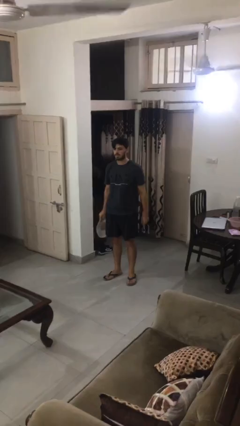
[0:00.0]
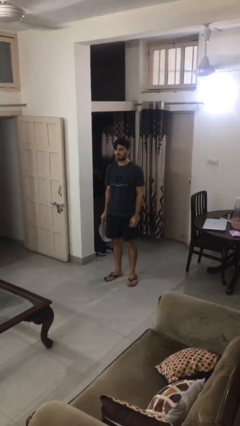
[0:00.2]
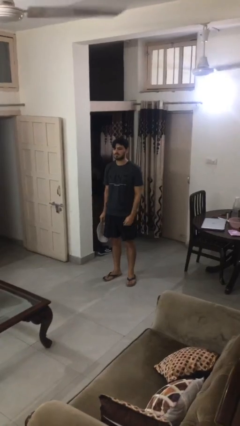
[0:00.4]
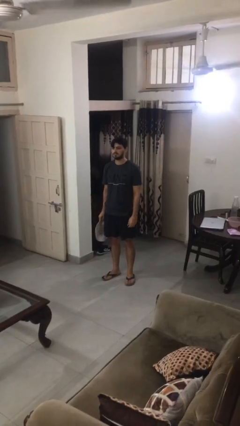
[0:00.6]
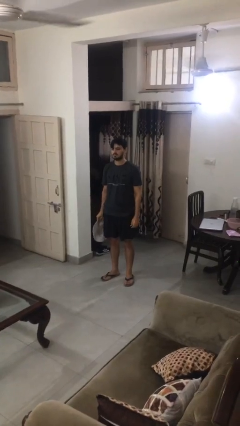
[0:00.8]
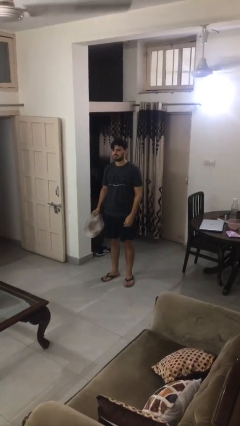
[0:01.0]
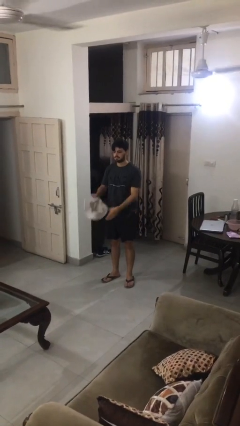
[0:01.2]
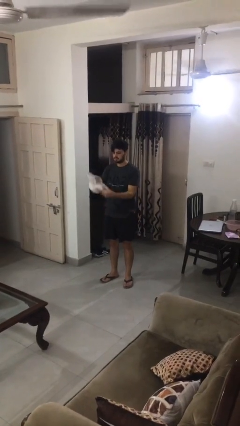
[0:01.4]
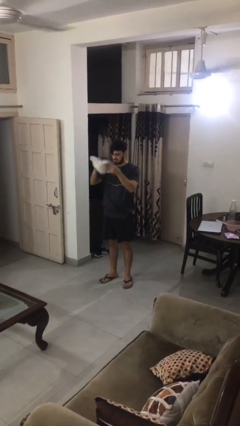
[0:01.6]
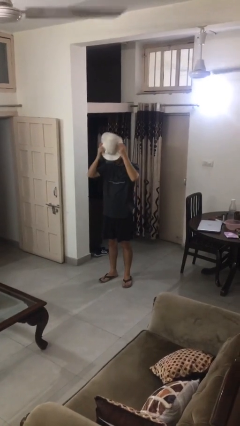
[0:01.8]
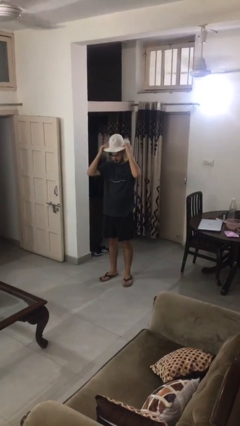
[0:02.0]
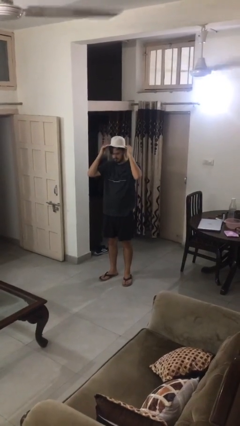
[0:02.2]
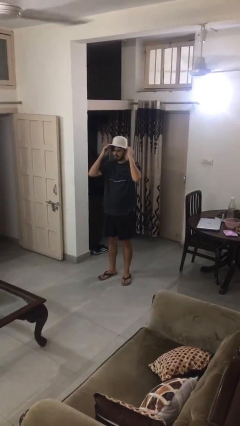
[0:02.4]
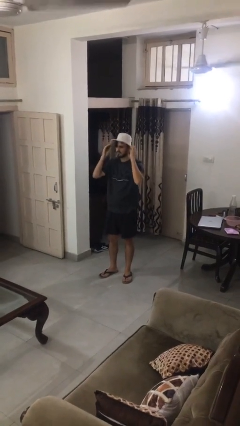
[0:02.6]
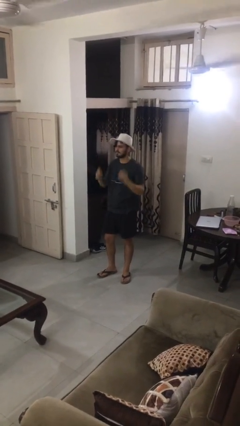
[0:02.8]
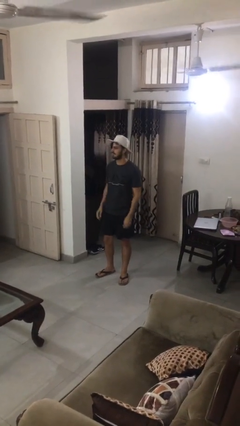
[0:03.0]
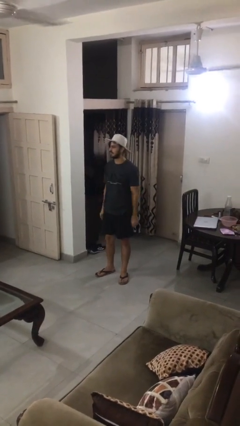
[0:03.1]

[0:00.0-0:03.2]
person puts on hat

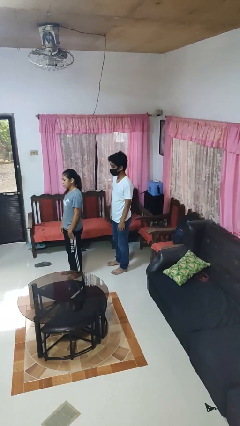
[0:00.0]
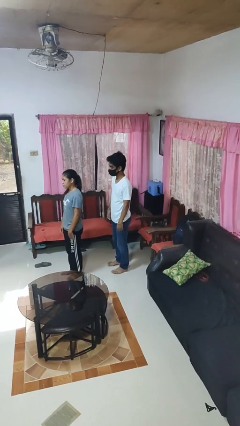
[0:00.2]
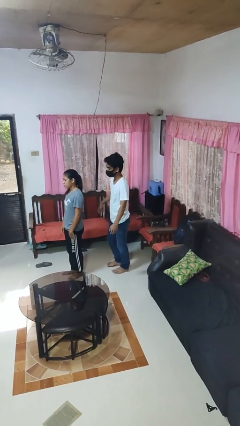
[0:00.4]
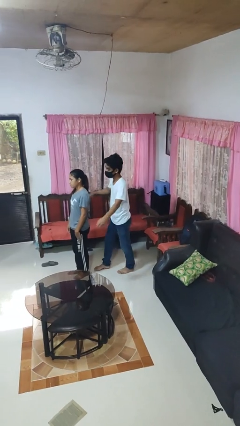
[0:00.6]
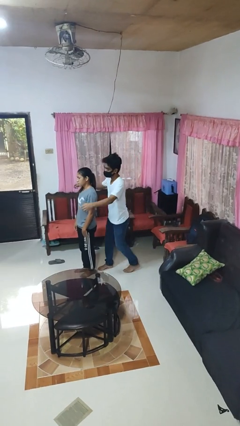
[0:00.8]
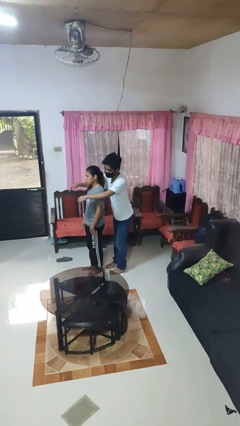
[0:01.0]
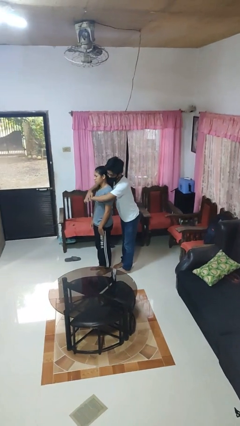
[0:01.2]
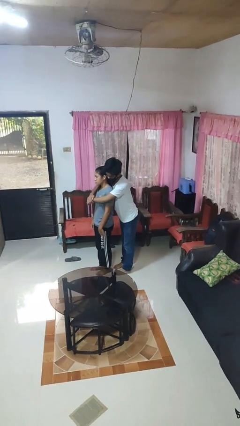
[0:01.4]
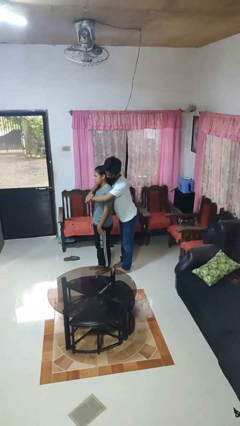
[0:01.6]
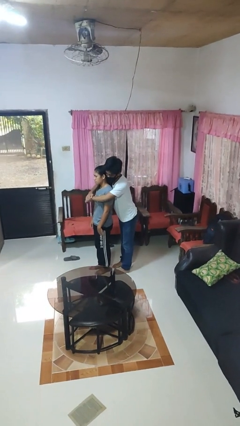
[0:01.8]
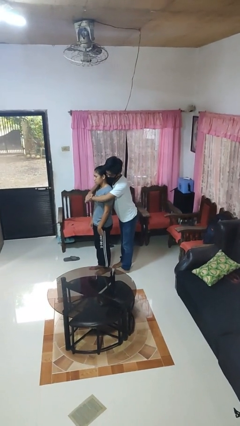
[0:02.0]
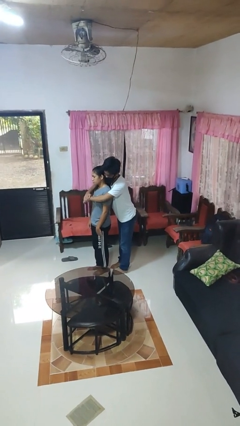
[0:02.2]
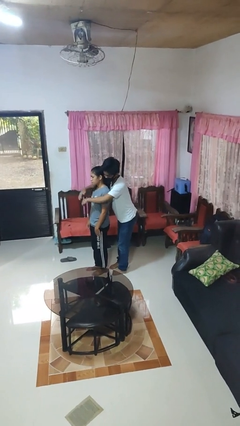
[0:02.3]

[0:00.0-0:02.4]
person hugs person from behind

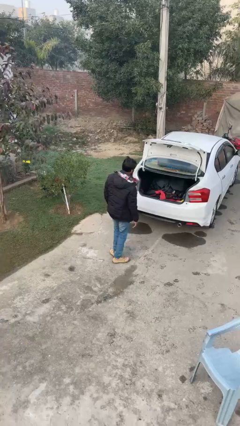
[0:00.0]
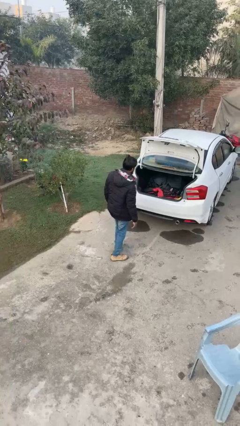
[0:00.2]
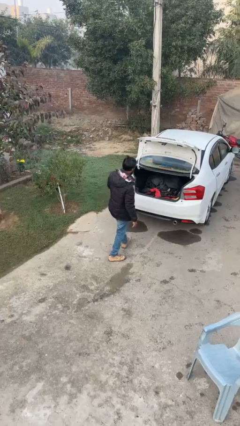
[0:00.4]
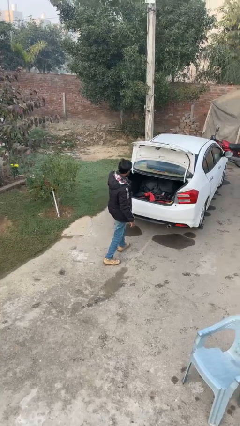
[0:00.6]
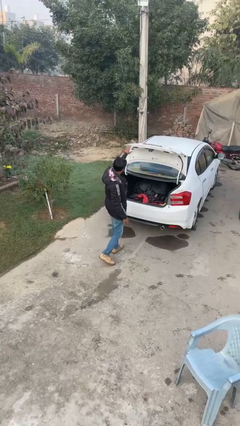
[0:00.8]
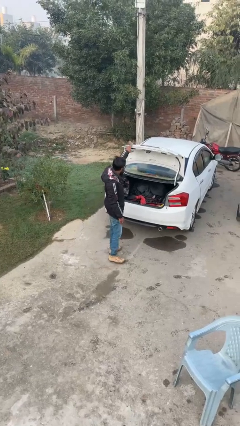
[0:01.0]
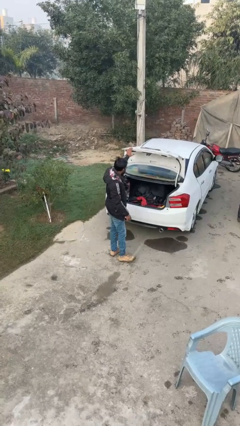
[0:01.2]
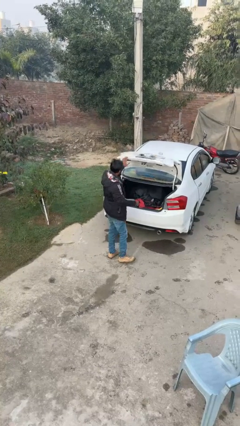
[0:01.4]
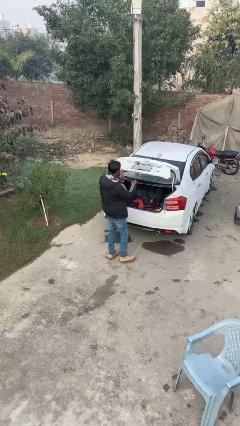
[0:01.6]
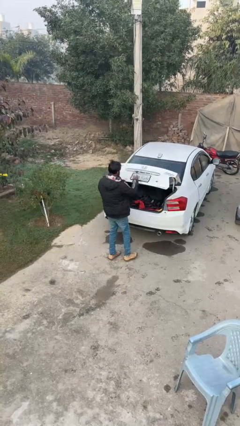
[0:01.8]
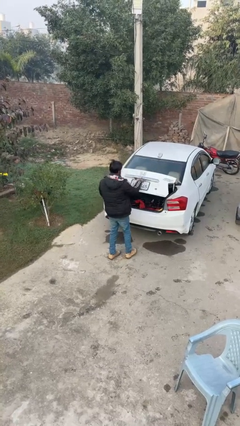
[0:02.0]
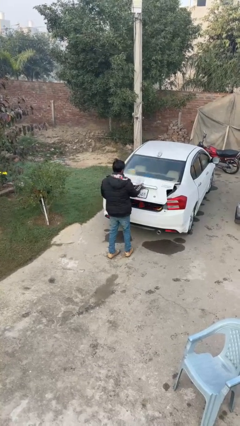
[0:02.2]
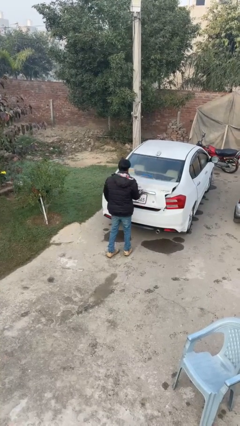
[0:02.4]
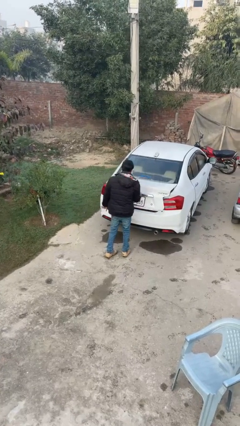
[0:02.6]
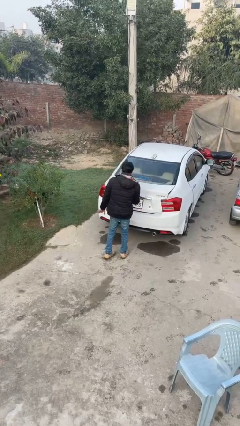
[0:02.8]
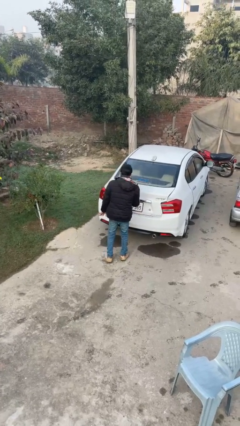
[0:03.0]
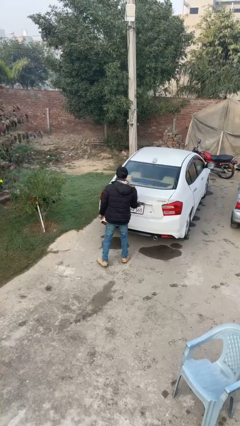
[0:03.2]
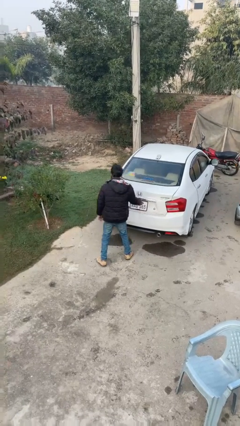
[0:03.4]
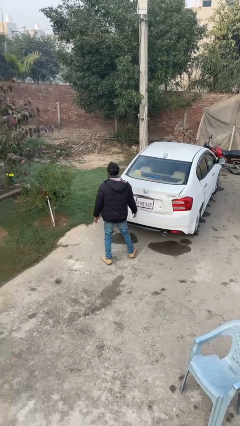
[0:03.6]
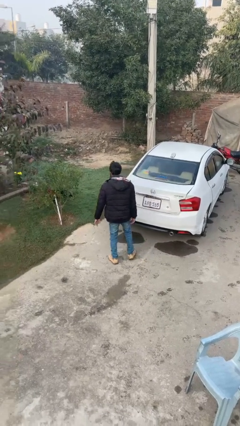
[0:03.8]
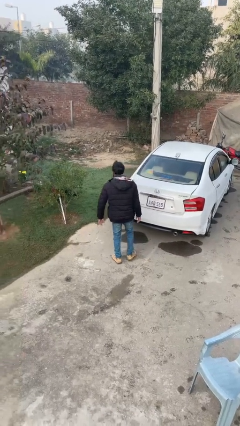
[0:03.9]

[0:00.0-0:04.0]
person closes car trunk

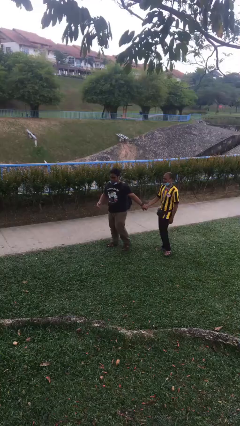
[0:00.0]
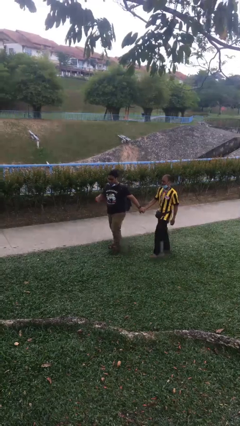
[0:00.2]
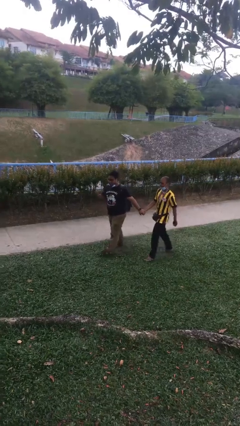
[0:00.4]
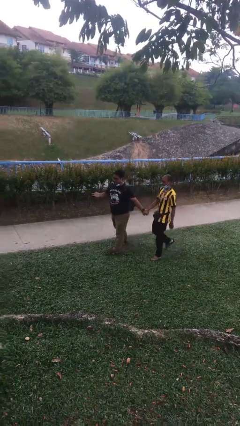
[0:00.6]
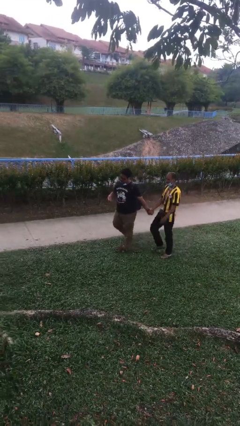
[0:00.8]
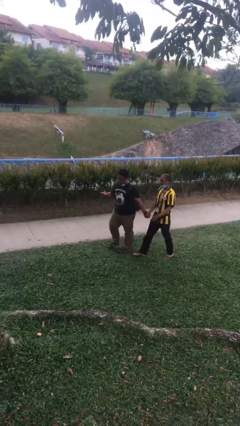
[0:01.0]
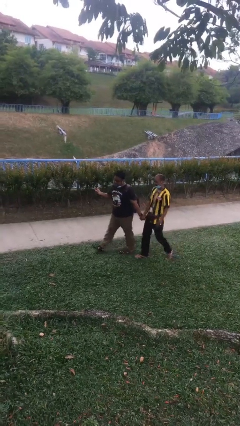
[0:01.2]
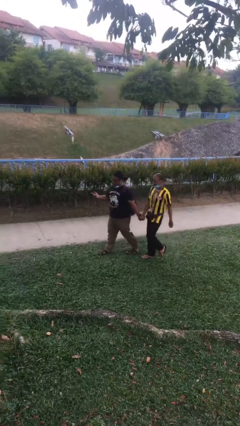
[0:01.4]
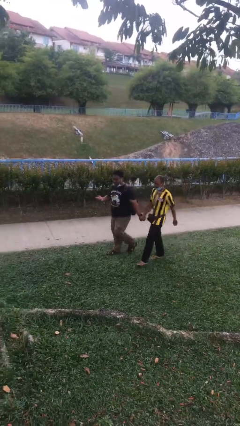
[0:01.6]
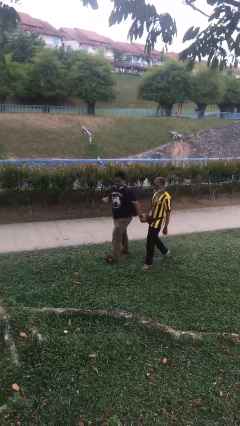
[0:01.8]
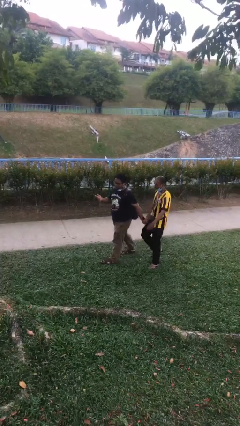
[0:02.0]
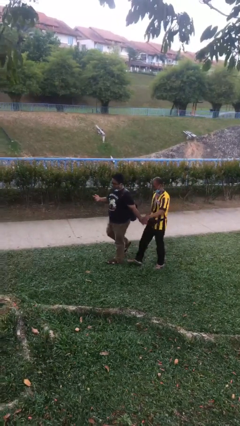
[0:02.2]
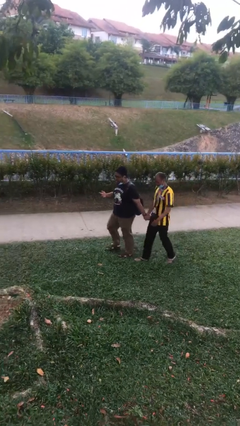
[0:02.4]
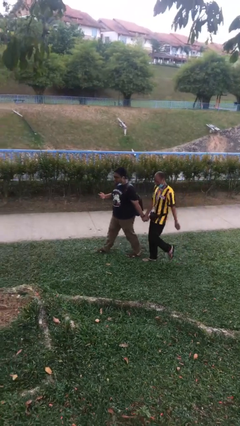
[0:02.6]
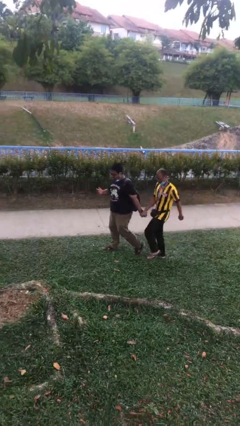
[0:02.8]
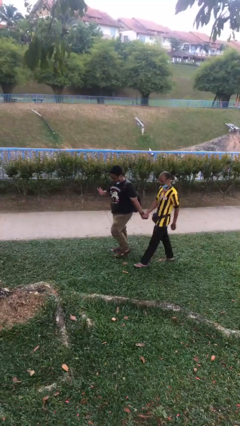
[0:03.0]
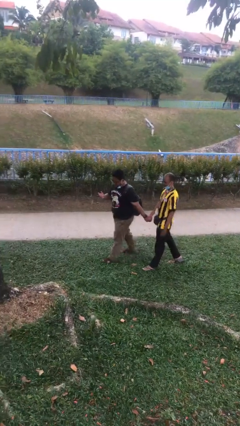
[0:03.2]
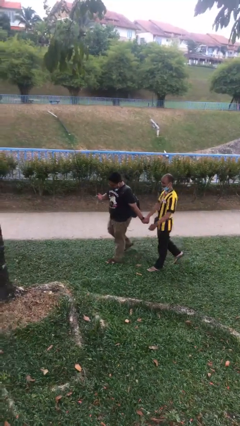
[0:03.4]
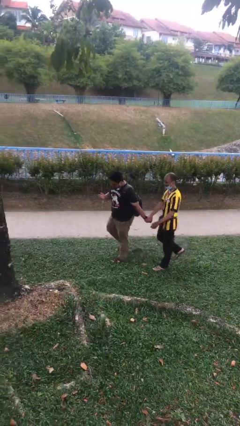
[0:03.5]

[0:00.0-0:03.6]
person holds hand

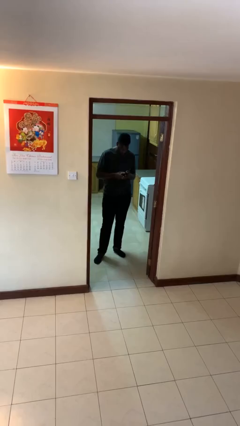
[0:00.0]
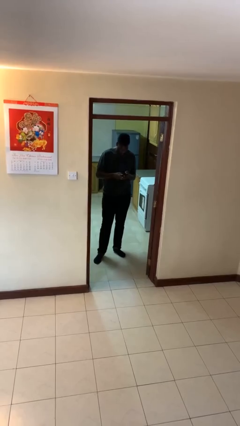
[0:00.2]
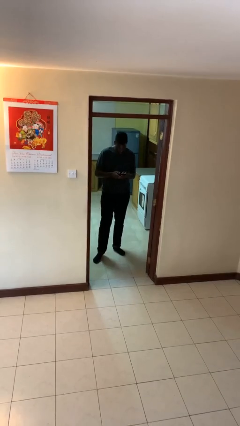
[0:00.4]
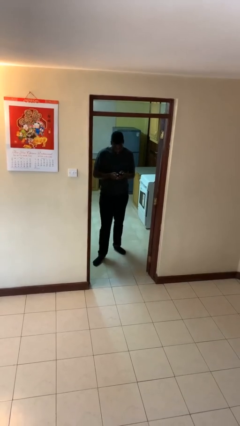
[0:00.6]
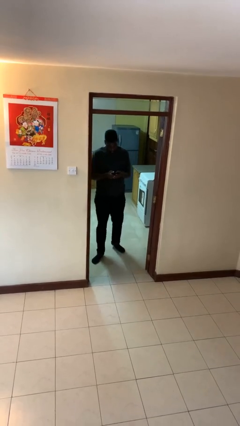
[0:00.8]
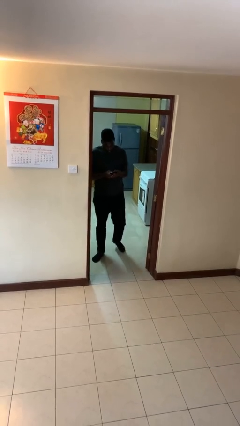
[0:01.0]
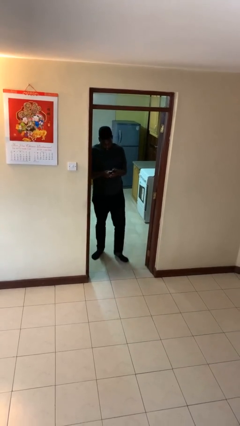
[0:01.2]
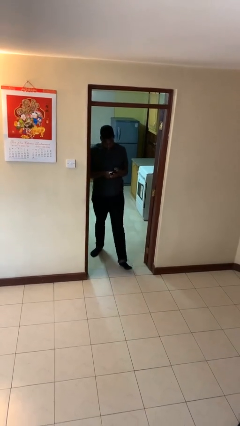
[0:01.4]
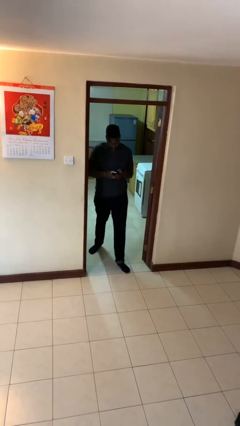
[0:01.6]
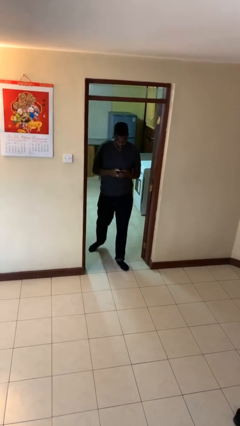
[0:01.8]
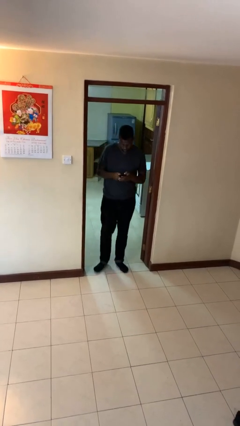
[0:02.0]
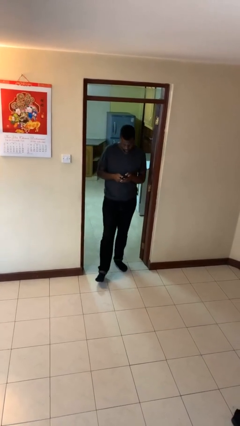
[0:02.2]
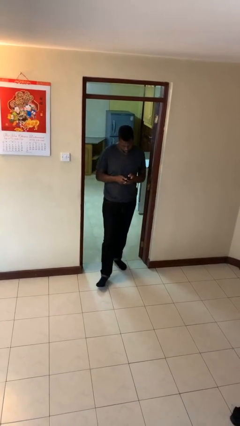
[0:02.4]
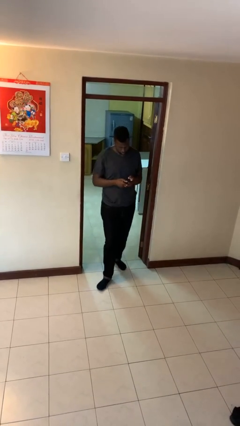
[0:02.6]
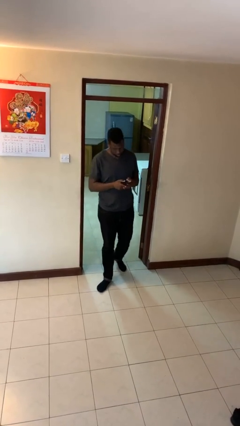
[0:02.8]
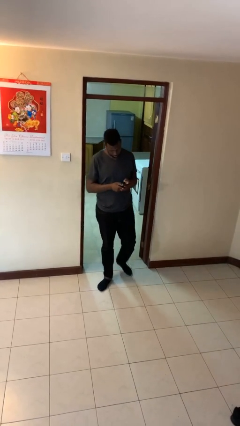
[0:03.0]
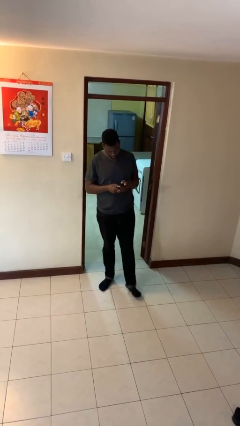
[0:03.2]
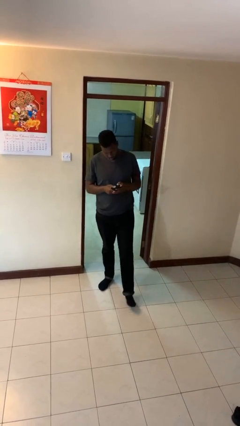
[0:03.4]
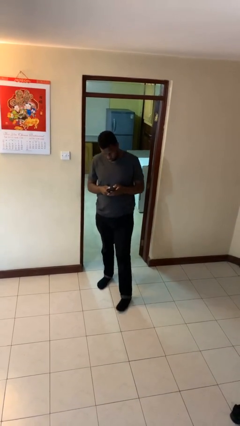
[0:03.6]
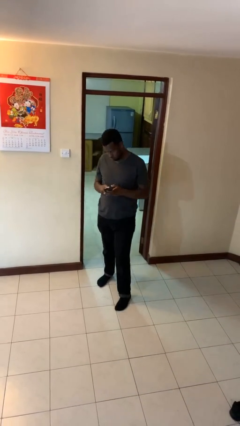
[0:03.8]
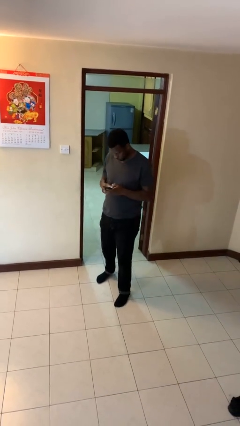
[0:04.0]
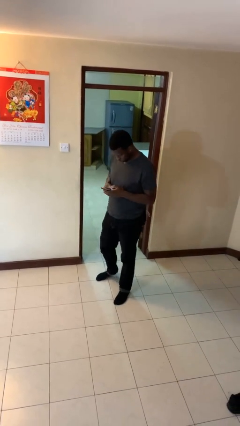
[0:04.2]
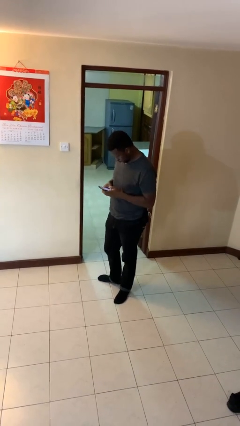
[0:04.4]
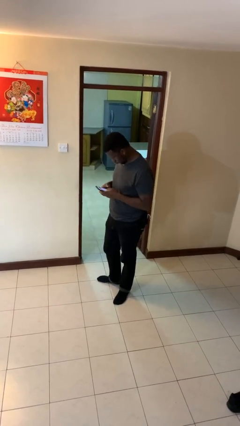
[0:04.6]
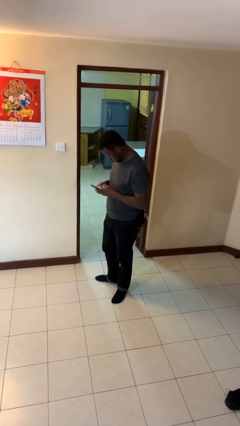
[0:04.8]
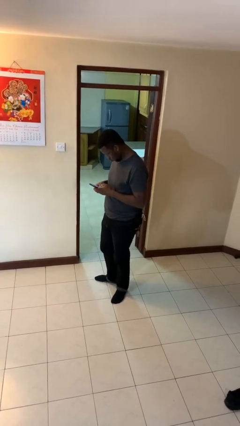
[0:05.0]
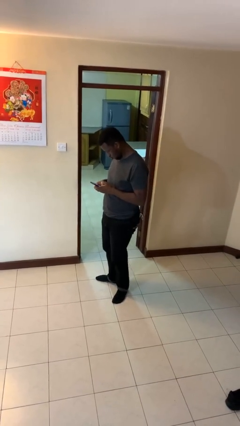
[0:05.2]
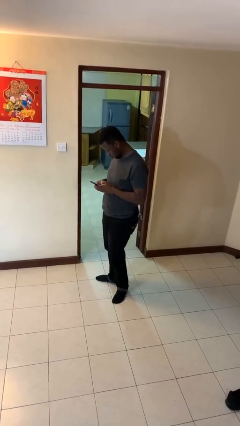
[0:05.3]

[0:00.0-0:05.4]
person enters scene through structure
